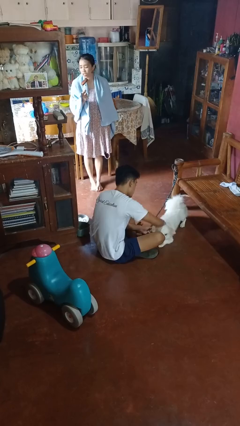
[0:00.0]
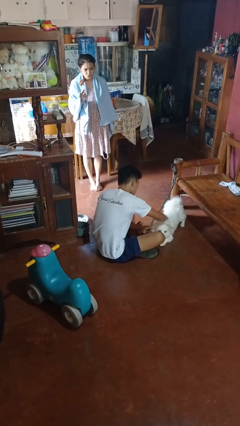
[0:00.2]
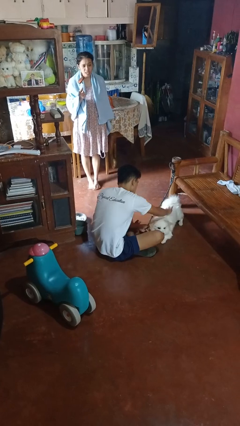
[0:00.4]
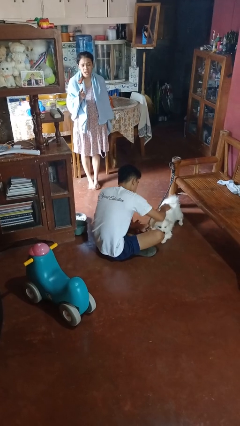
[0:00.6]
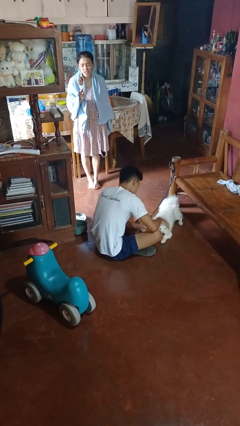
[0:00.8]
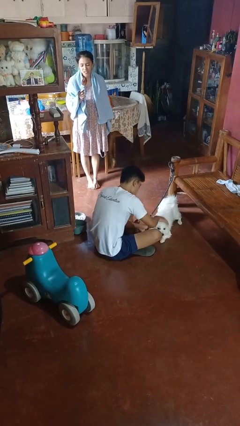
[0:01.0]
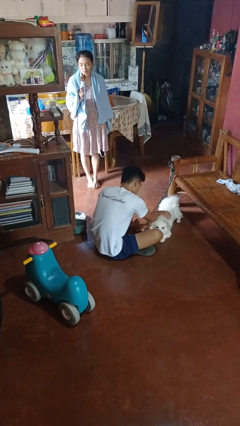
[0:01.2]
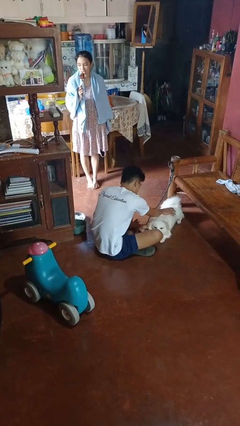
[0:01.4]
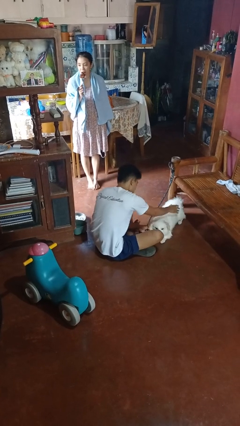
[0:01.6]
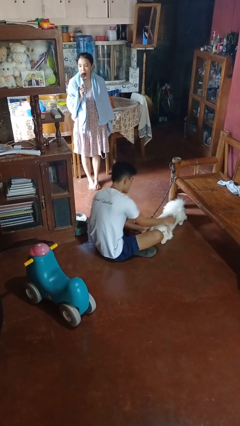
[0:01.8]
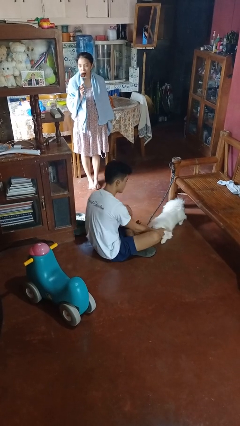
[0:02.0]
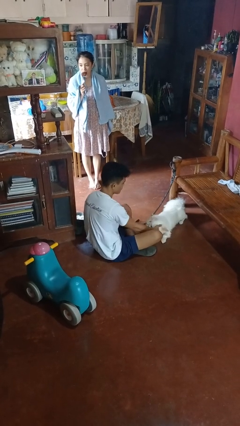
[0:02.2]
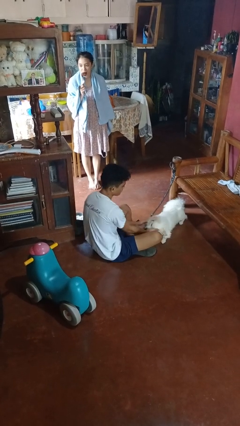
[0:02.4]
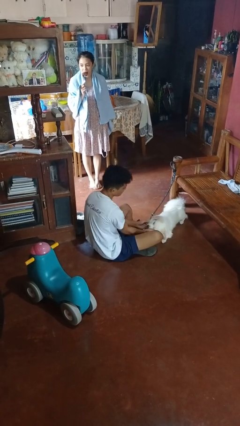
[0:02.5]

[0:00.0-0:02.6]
person pets dog

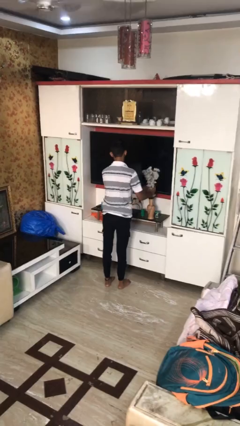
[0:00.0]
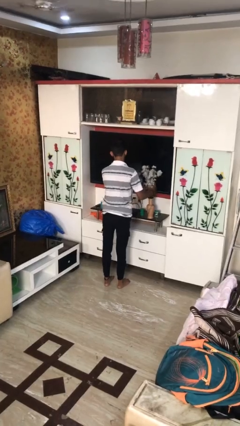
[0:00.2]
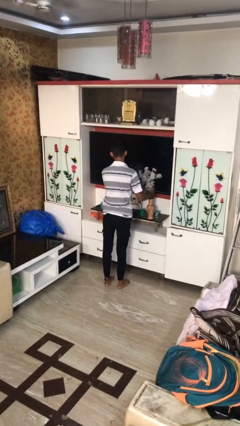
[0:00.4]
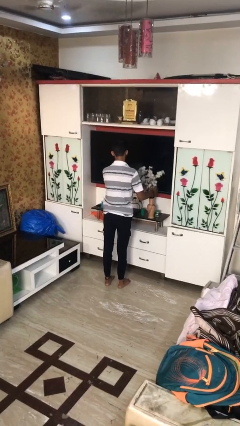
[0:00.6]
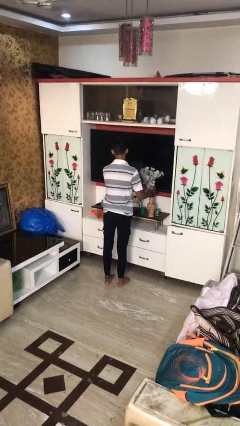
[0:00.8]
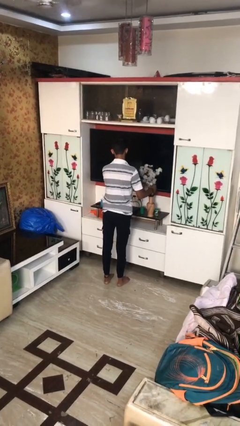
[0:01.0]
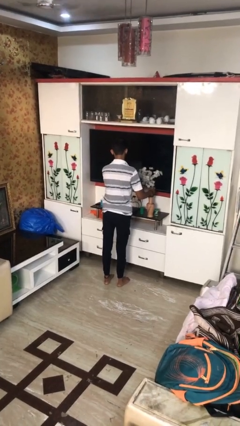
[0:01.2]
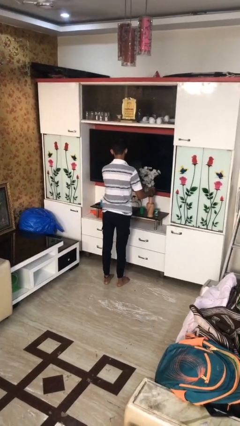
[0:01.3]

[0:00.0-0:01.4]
person arranges flowers in vase

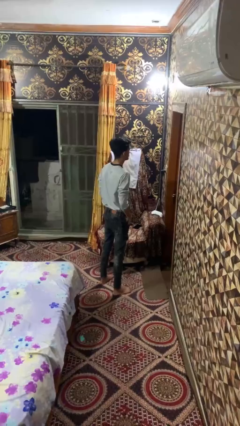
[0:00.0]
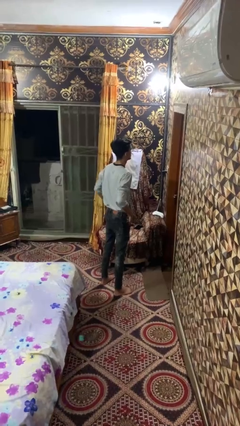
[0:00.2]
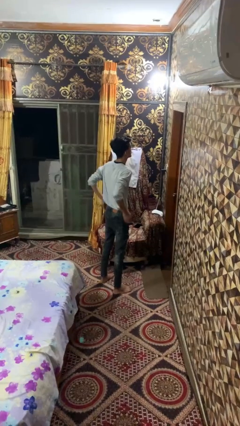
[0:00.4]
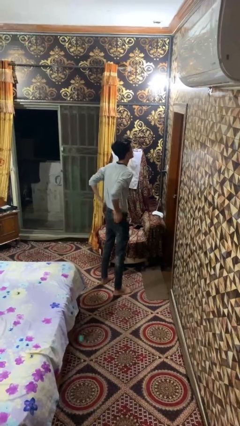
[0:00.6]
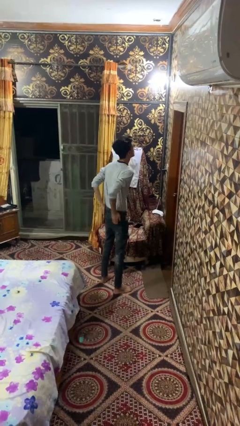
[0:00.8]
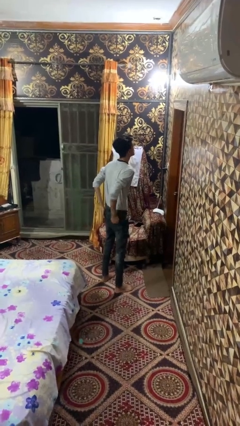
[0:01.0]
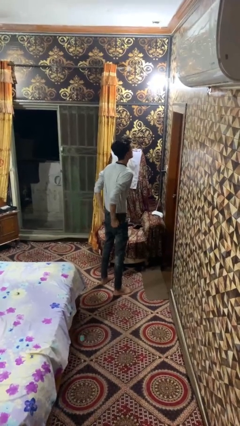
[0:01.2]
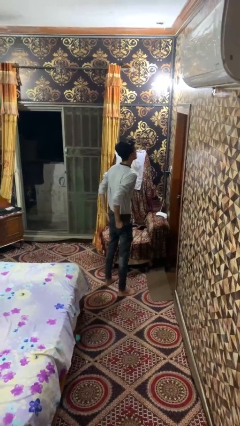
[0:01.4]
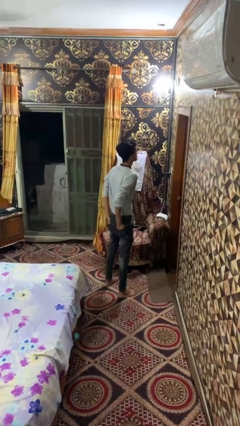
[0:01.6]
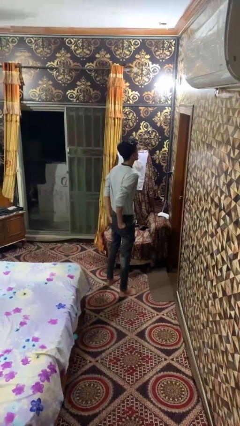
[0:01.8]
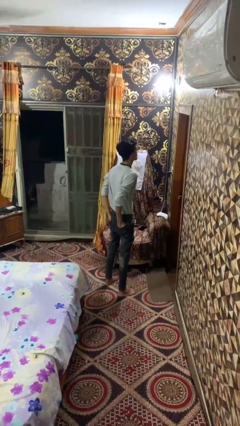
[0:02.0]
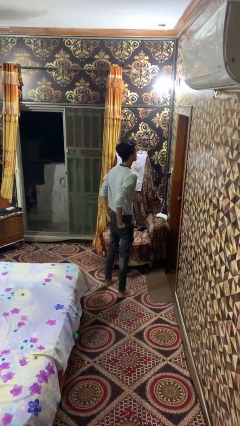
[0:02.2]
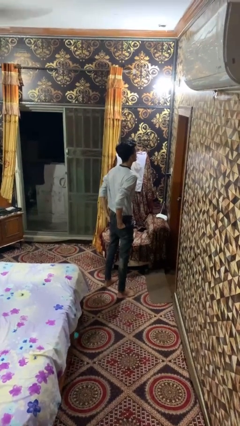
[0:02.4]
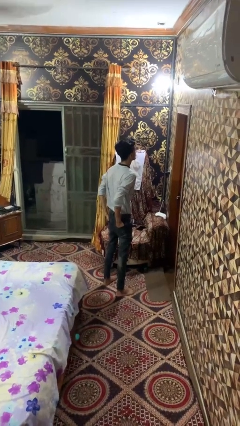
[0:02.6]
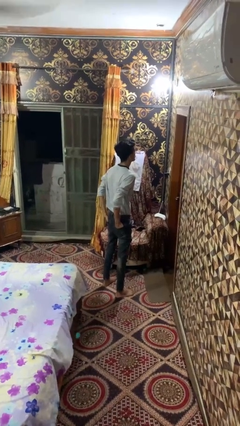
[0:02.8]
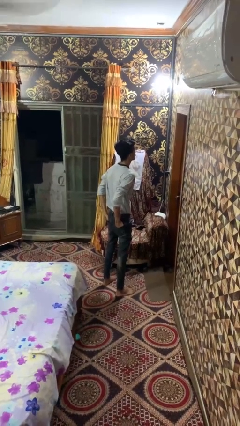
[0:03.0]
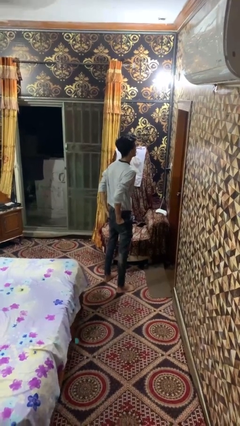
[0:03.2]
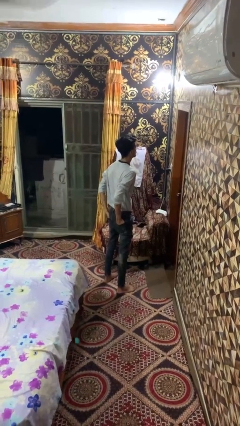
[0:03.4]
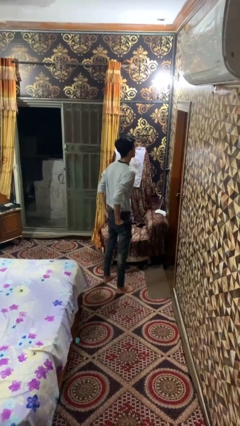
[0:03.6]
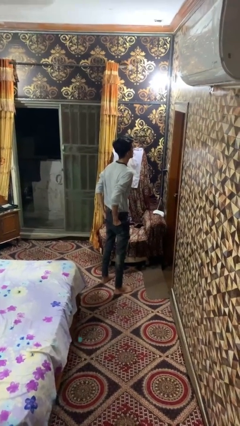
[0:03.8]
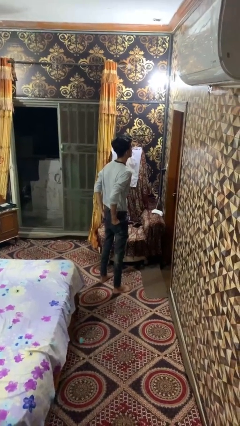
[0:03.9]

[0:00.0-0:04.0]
person puts hands in back pockets

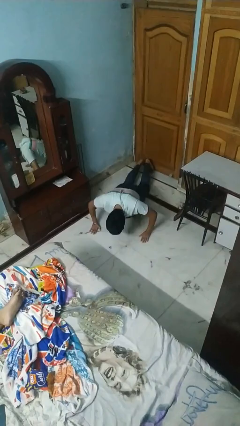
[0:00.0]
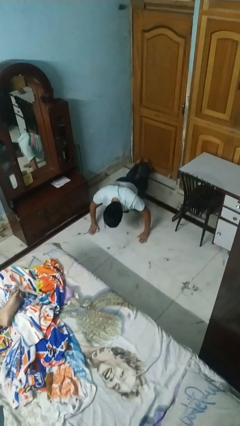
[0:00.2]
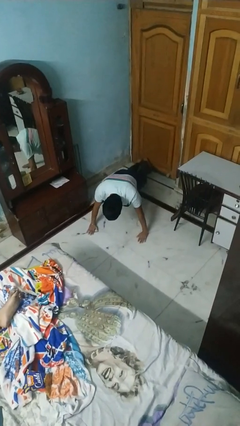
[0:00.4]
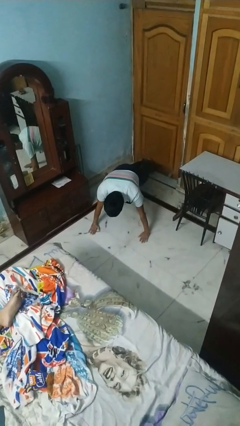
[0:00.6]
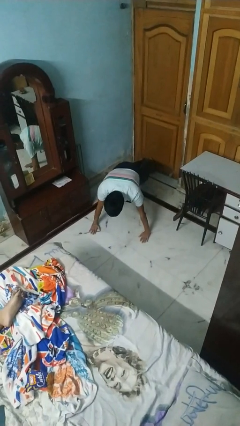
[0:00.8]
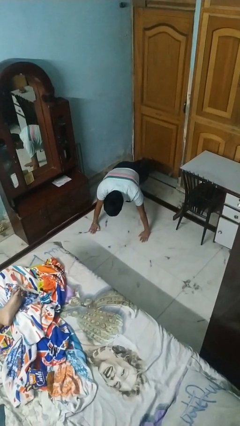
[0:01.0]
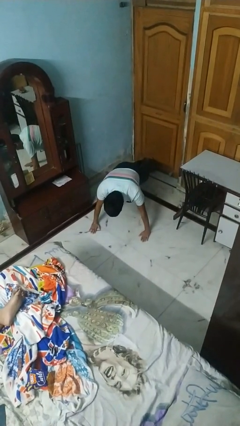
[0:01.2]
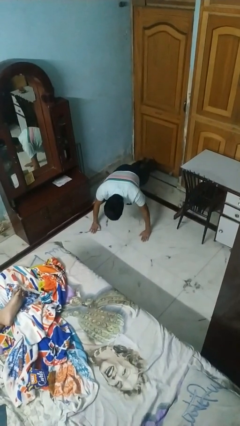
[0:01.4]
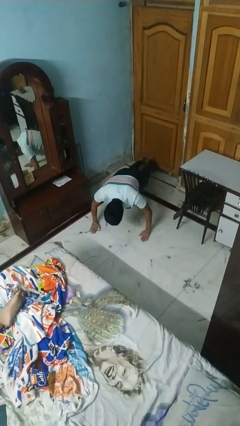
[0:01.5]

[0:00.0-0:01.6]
person exercises with pushup

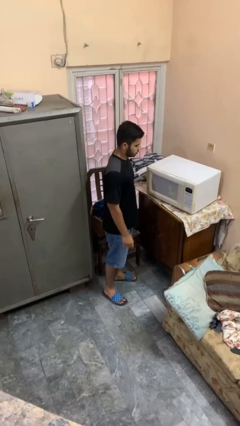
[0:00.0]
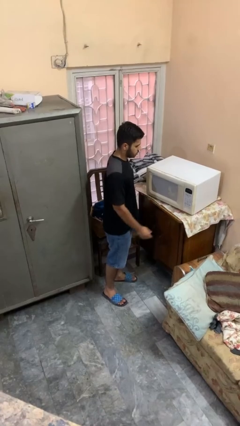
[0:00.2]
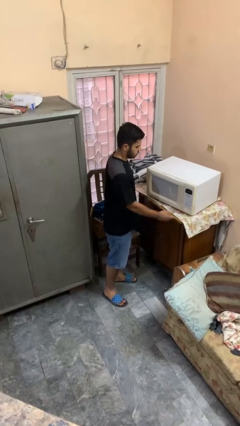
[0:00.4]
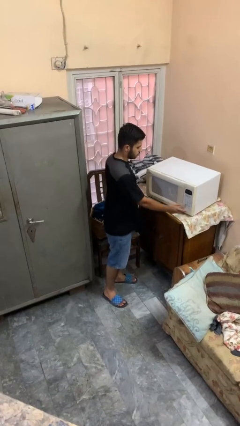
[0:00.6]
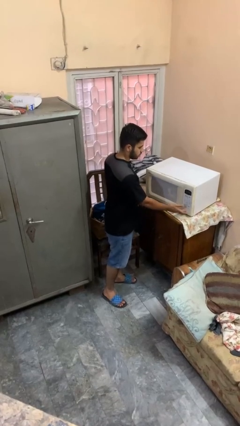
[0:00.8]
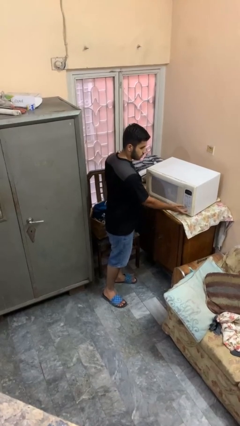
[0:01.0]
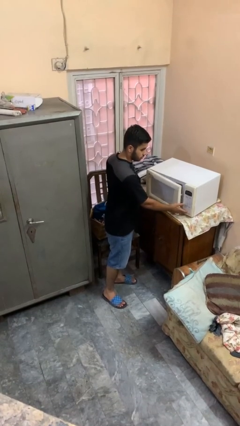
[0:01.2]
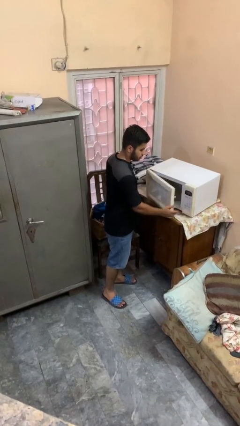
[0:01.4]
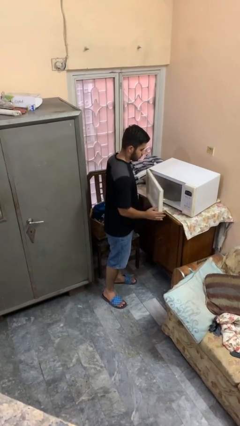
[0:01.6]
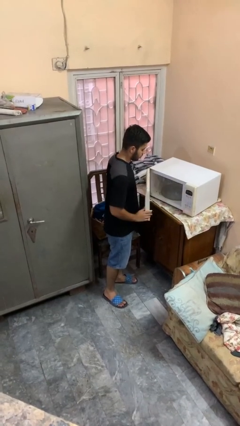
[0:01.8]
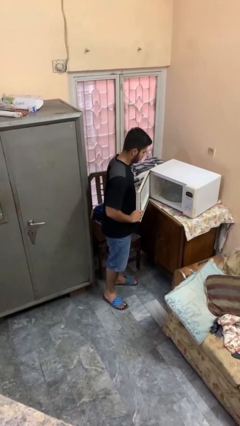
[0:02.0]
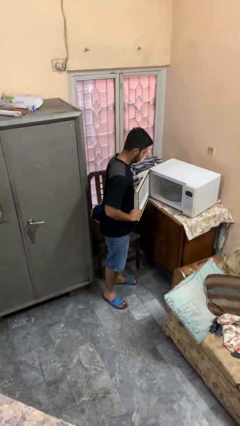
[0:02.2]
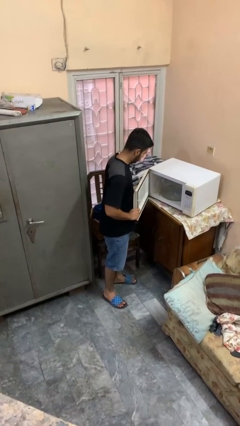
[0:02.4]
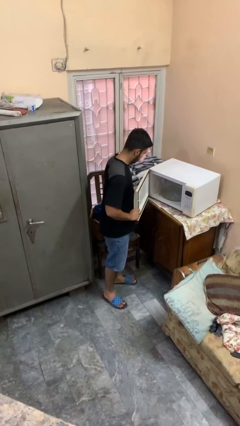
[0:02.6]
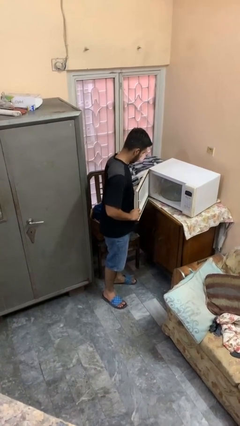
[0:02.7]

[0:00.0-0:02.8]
person opens microwave

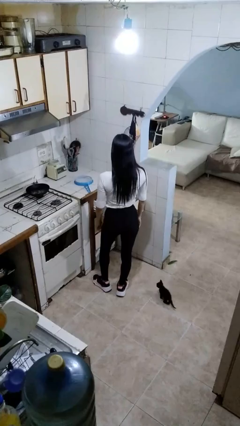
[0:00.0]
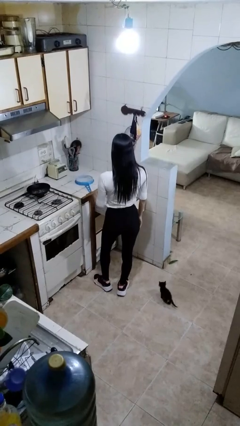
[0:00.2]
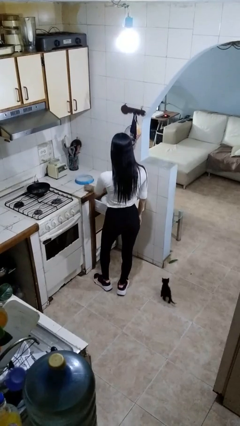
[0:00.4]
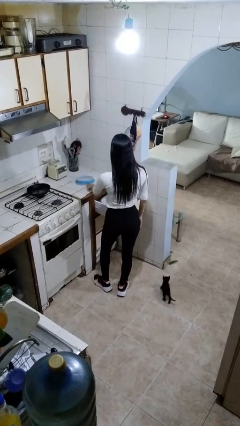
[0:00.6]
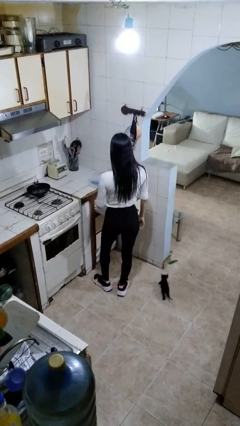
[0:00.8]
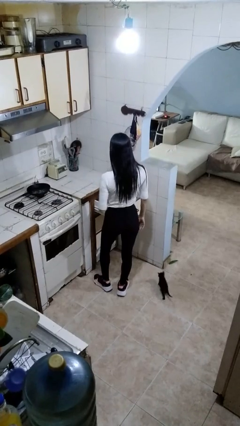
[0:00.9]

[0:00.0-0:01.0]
person puts object into kitchen drawer

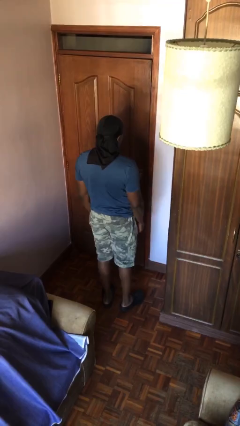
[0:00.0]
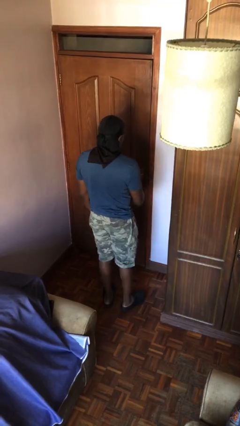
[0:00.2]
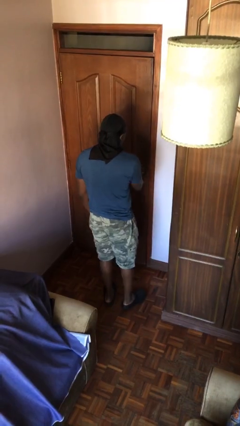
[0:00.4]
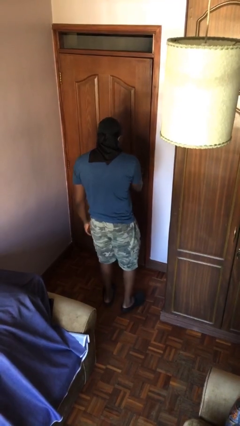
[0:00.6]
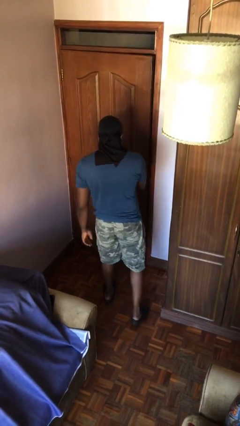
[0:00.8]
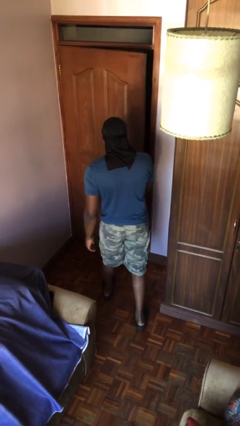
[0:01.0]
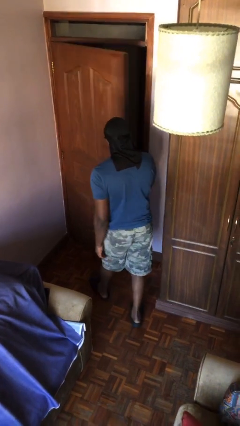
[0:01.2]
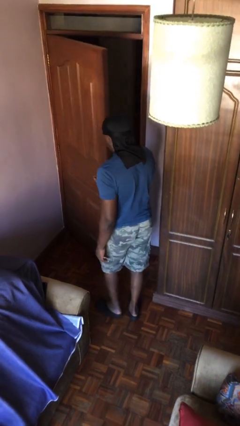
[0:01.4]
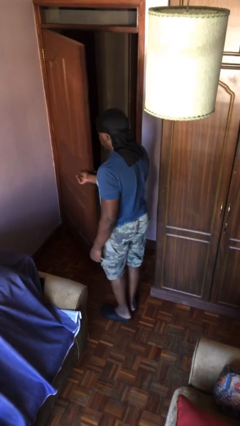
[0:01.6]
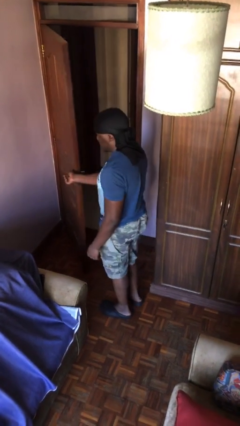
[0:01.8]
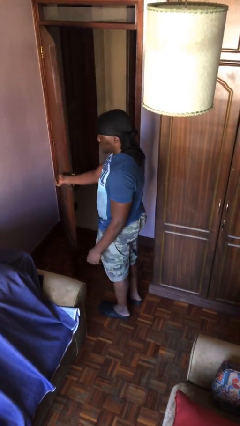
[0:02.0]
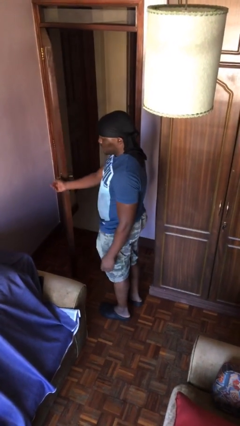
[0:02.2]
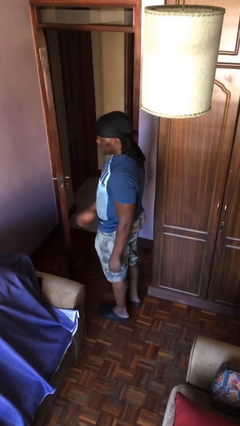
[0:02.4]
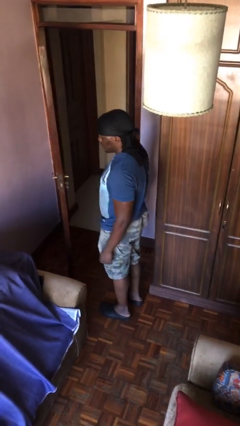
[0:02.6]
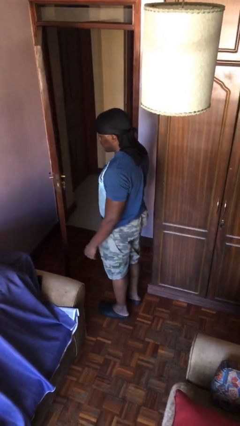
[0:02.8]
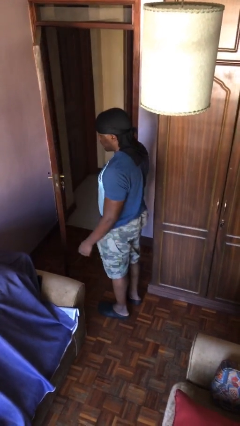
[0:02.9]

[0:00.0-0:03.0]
person opens facility door

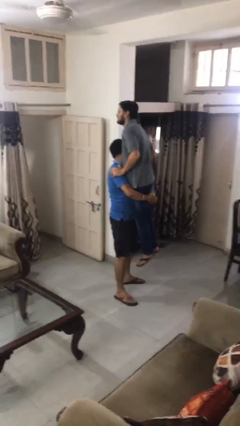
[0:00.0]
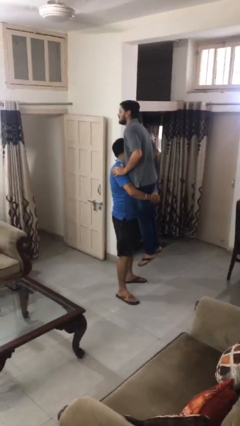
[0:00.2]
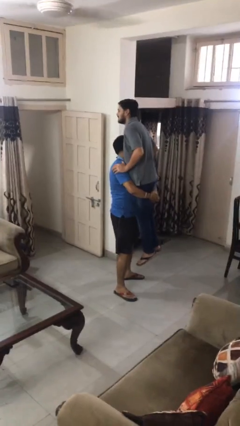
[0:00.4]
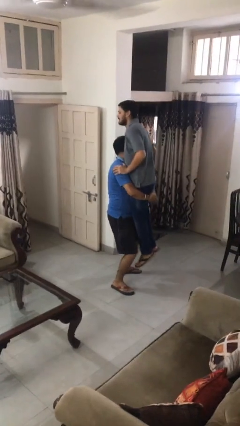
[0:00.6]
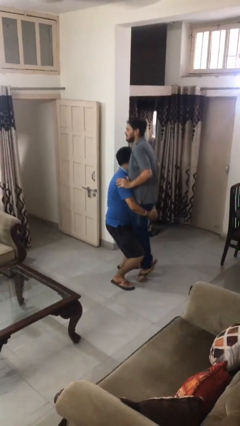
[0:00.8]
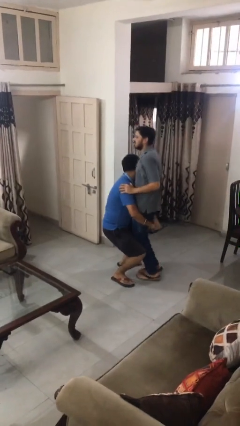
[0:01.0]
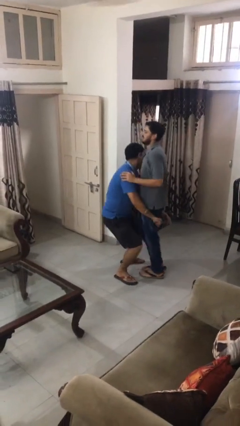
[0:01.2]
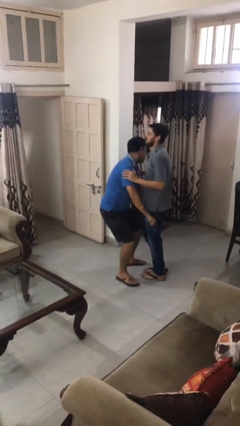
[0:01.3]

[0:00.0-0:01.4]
person puts down person
